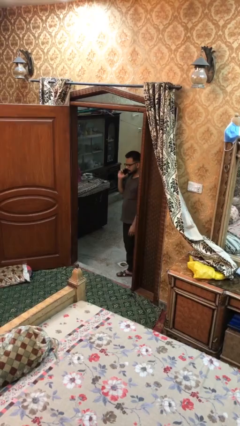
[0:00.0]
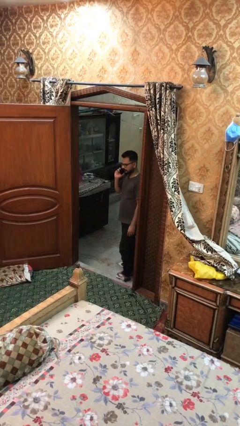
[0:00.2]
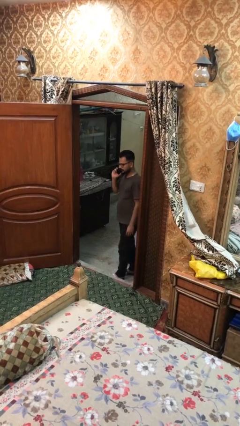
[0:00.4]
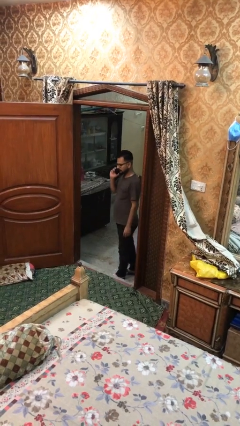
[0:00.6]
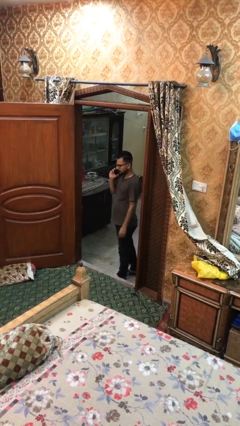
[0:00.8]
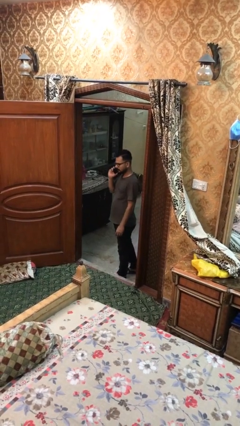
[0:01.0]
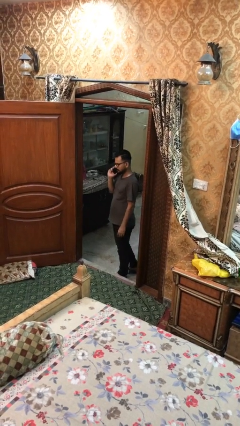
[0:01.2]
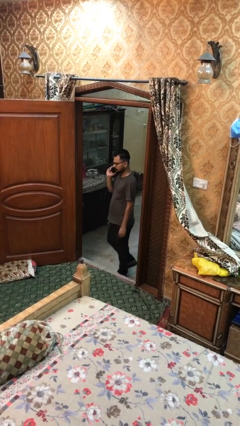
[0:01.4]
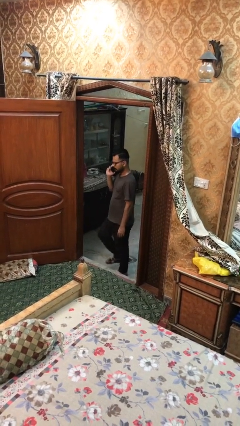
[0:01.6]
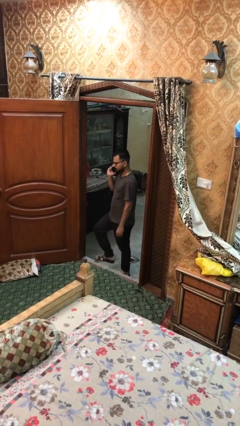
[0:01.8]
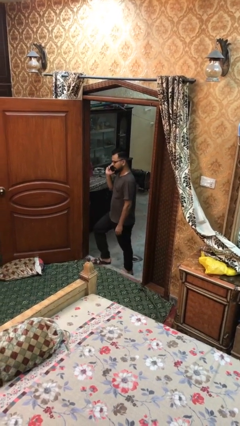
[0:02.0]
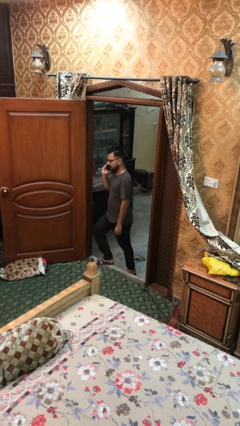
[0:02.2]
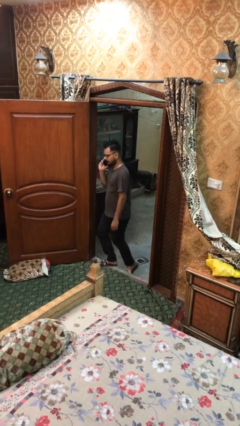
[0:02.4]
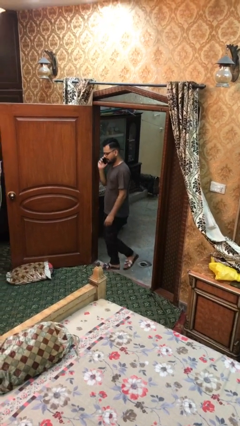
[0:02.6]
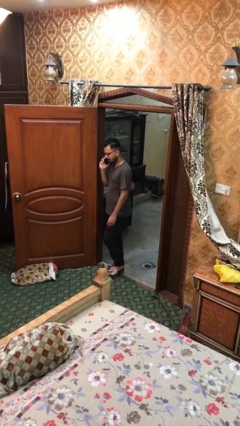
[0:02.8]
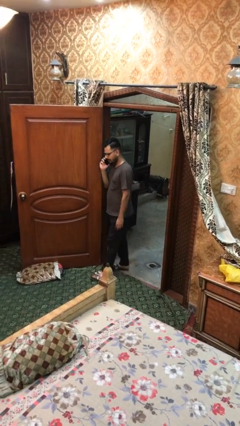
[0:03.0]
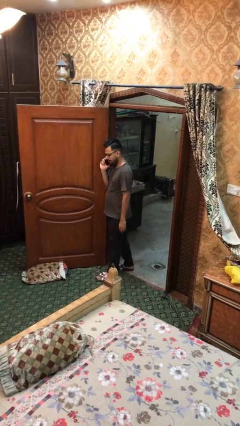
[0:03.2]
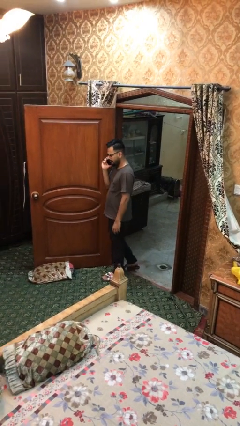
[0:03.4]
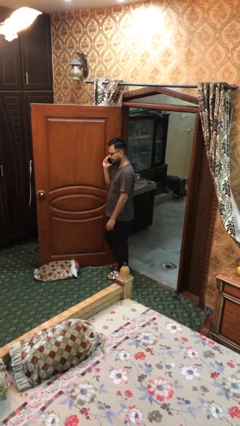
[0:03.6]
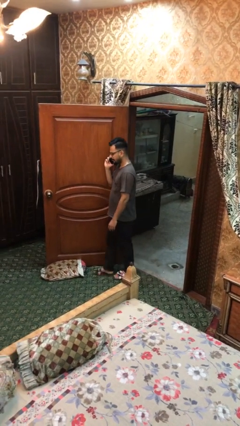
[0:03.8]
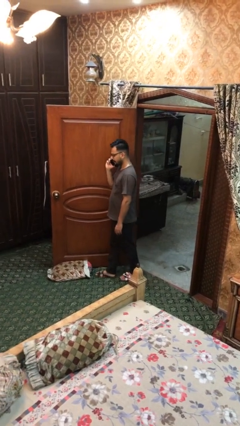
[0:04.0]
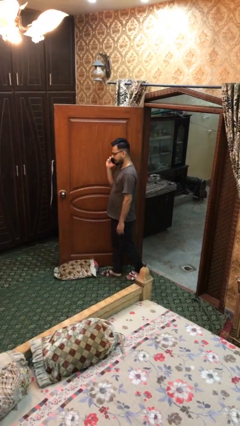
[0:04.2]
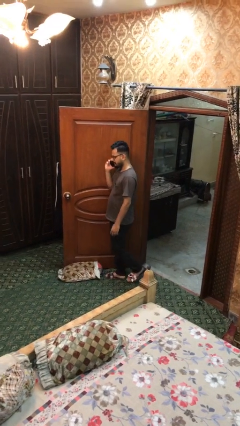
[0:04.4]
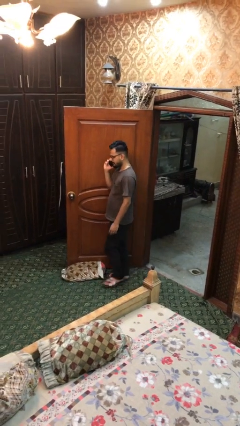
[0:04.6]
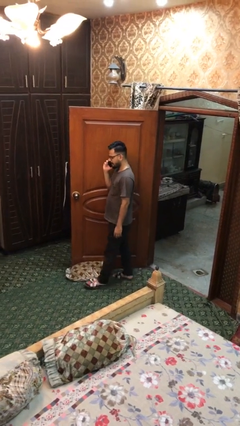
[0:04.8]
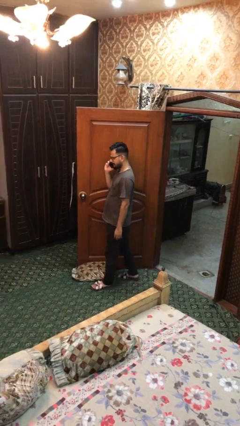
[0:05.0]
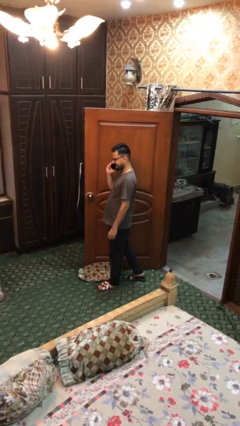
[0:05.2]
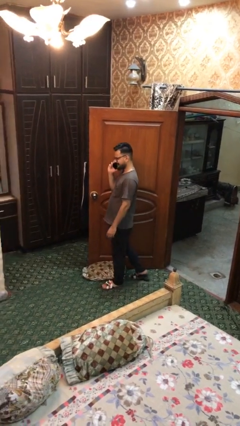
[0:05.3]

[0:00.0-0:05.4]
person enters scene through structure

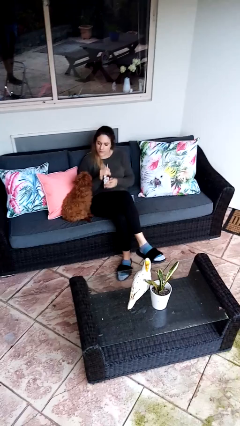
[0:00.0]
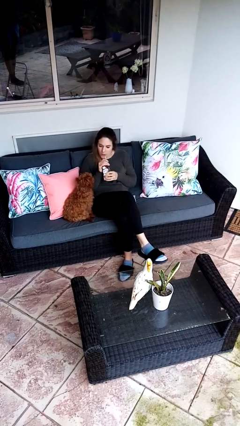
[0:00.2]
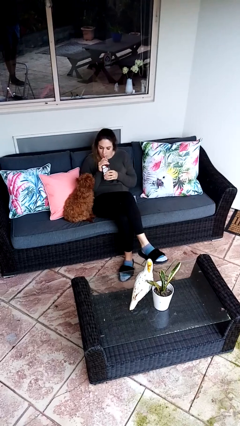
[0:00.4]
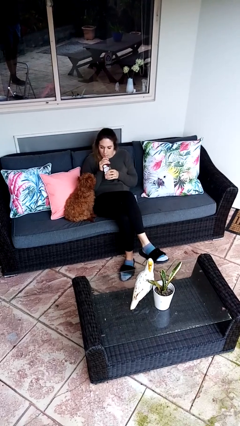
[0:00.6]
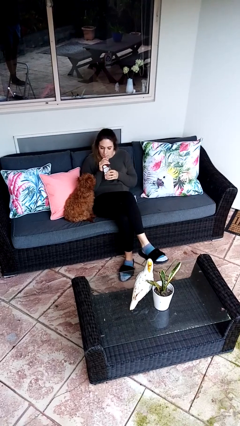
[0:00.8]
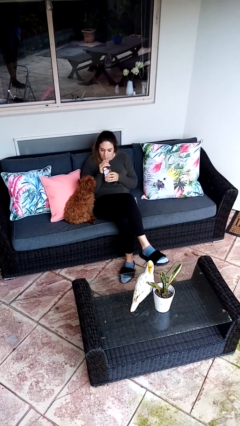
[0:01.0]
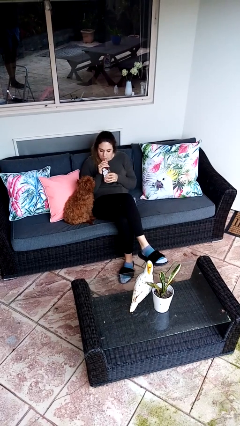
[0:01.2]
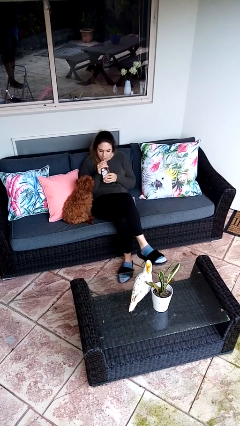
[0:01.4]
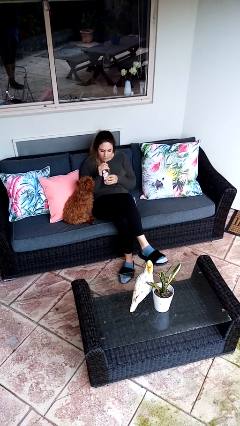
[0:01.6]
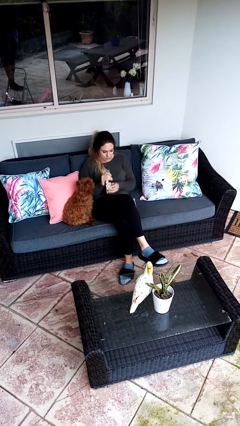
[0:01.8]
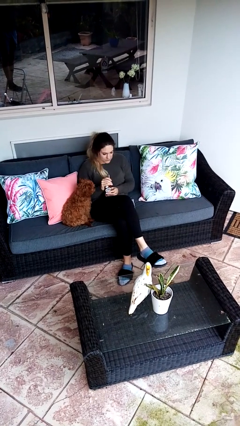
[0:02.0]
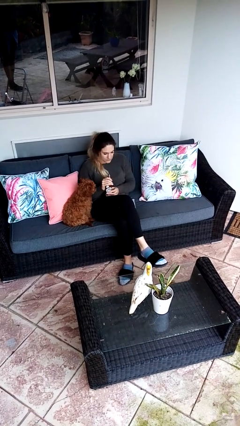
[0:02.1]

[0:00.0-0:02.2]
person drinks from straw

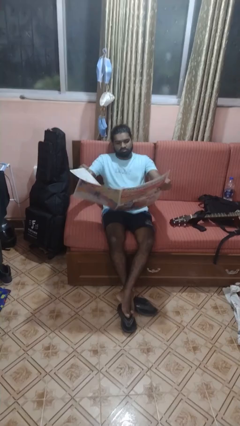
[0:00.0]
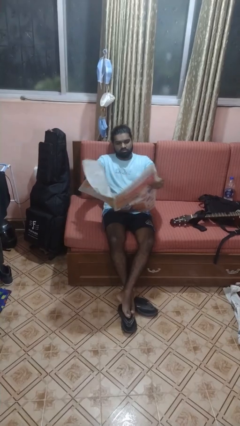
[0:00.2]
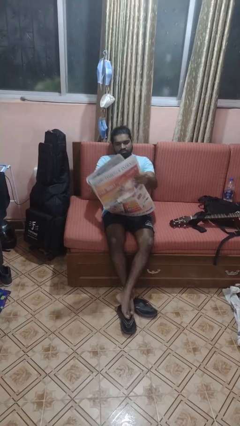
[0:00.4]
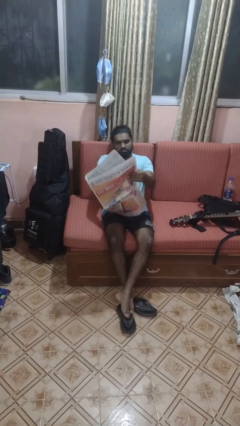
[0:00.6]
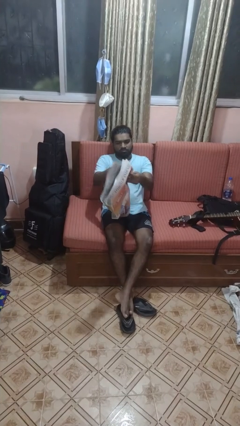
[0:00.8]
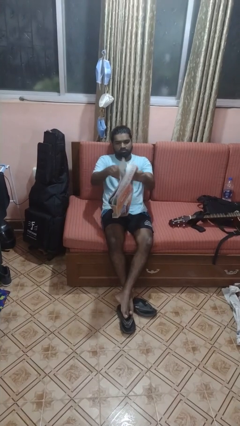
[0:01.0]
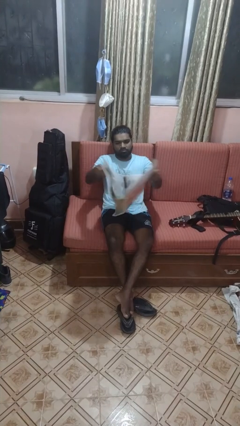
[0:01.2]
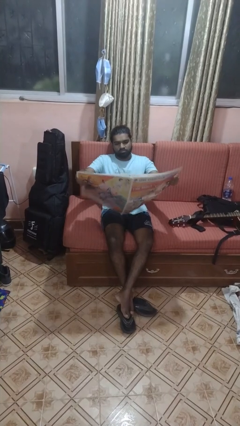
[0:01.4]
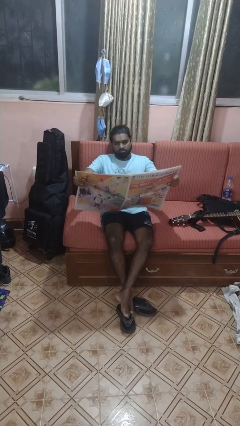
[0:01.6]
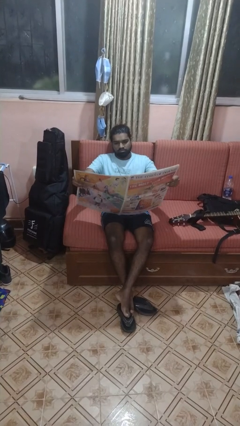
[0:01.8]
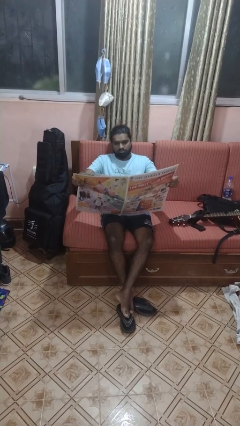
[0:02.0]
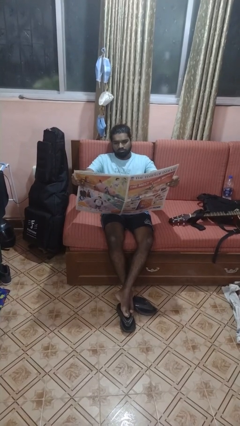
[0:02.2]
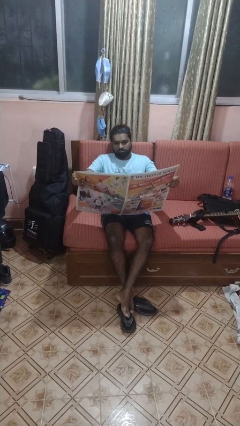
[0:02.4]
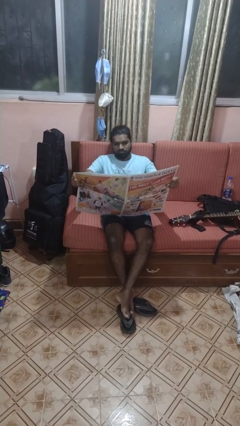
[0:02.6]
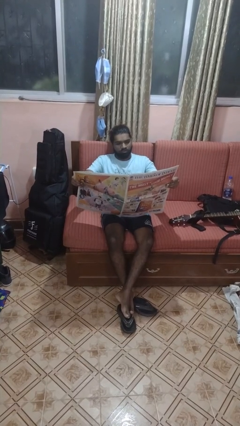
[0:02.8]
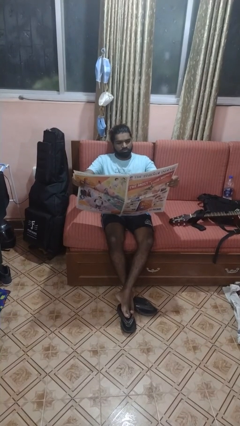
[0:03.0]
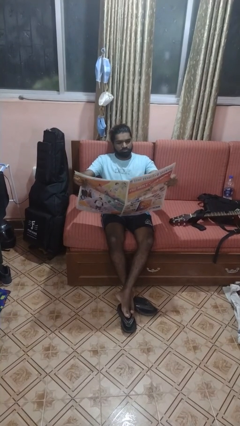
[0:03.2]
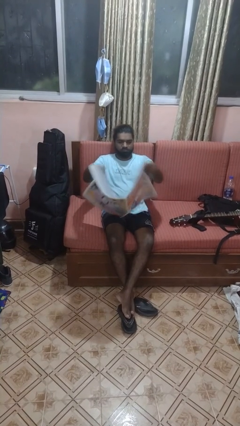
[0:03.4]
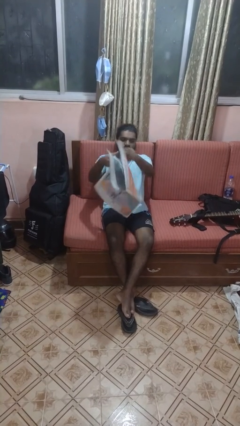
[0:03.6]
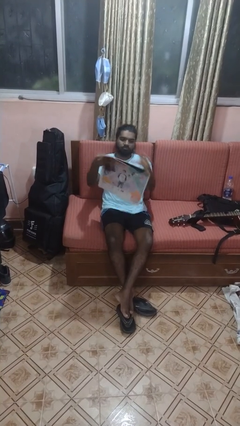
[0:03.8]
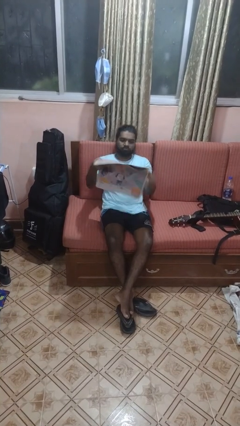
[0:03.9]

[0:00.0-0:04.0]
person reads newspaper

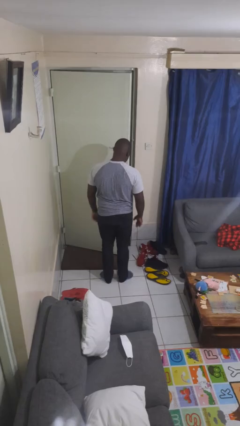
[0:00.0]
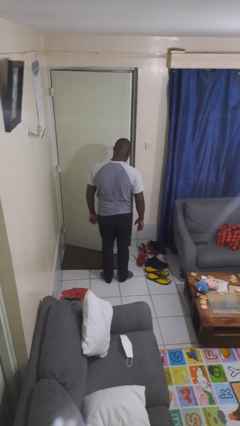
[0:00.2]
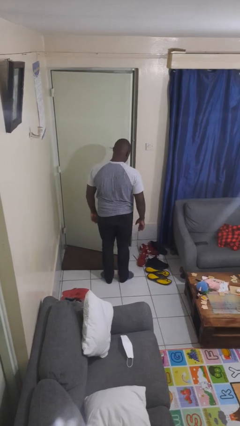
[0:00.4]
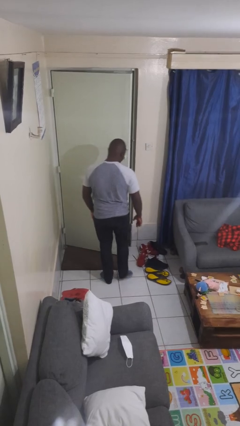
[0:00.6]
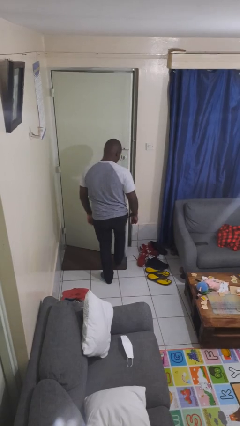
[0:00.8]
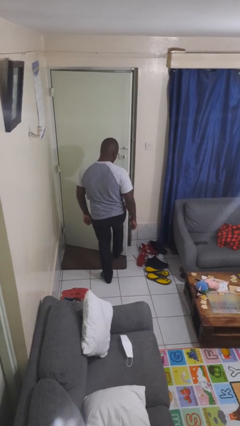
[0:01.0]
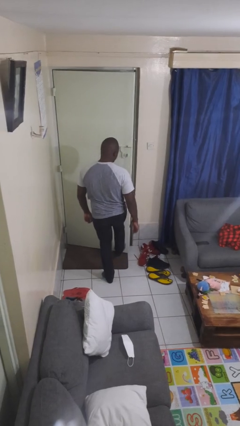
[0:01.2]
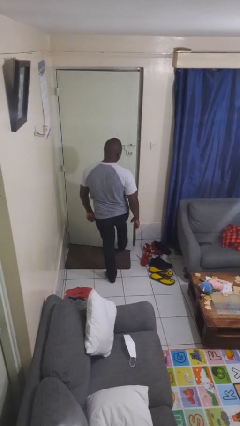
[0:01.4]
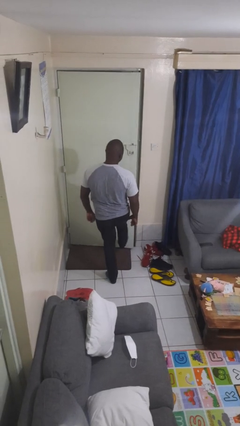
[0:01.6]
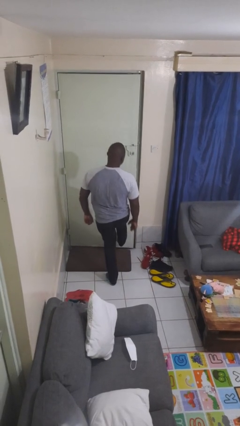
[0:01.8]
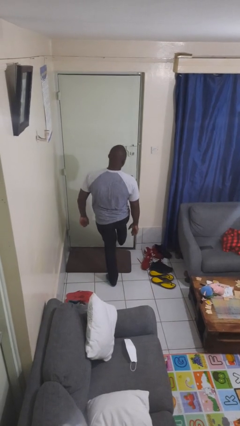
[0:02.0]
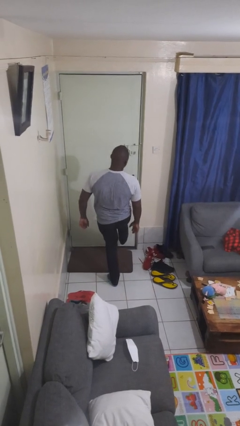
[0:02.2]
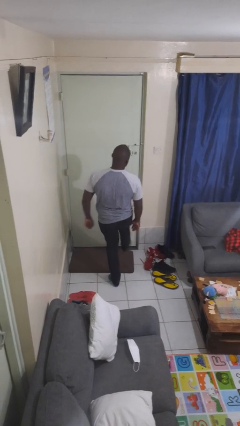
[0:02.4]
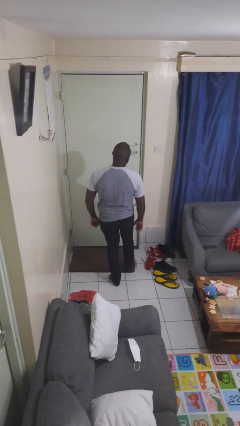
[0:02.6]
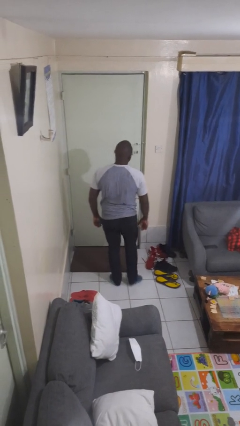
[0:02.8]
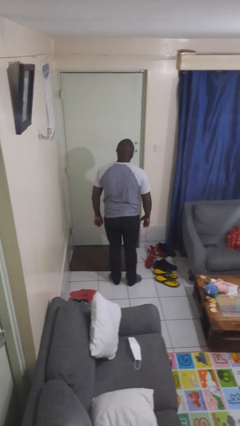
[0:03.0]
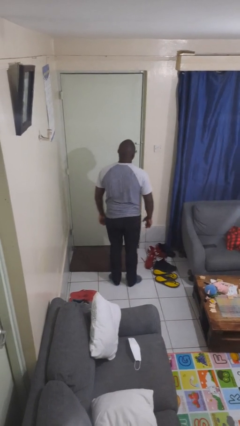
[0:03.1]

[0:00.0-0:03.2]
person closes door with foot

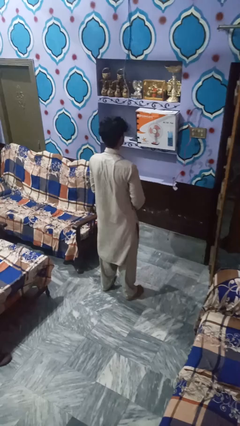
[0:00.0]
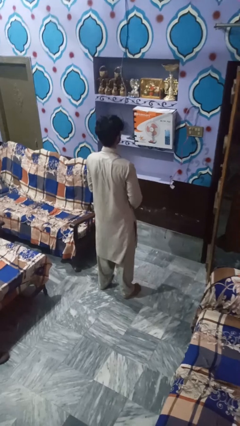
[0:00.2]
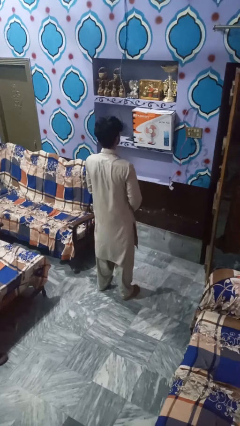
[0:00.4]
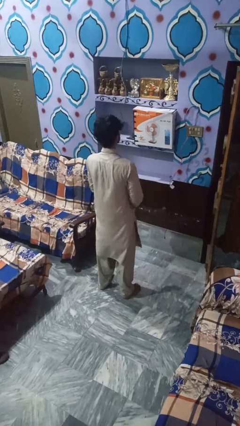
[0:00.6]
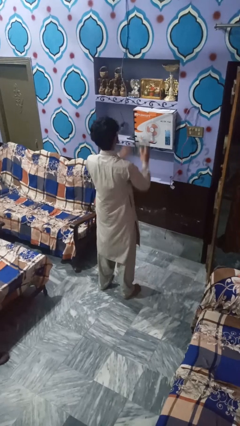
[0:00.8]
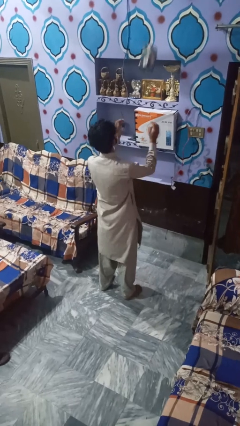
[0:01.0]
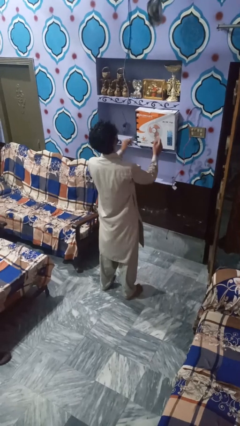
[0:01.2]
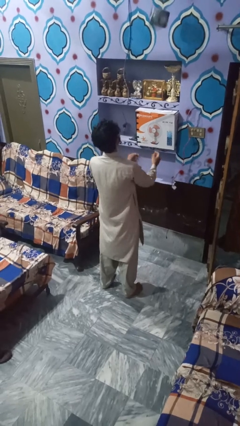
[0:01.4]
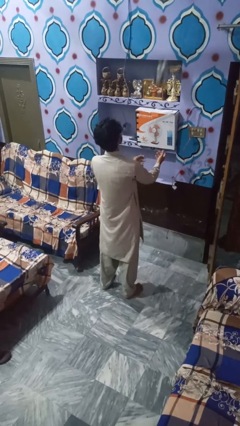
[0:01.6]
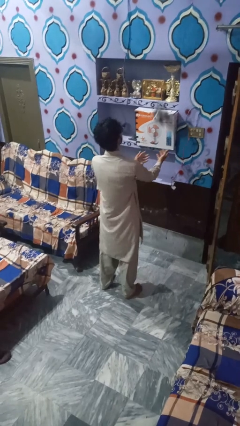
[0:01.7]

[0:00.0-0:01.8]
person drops object

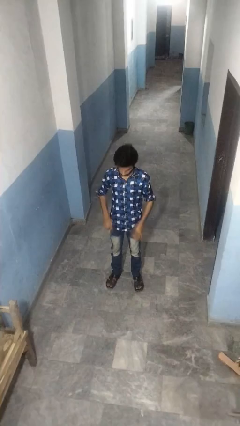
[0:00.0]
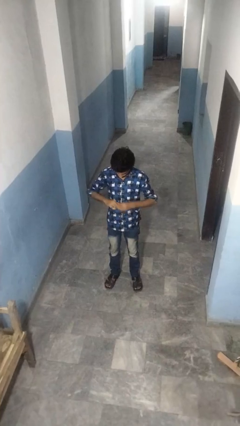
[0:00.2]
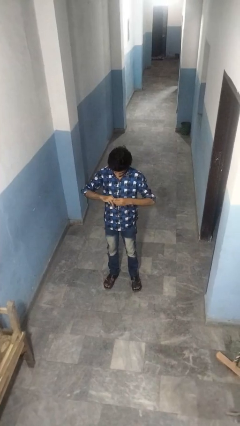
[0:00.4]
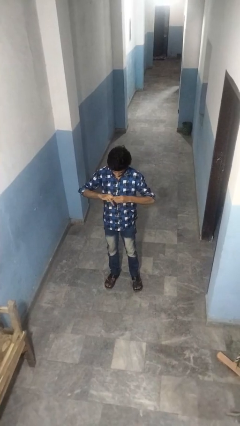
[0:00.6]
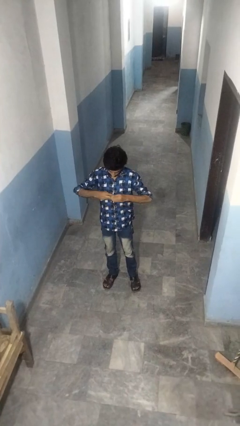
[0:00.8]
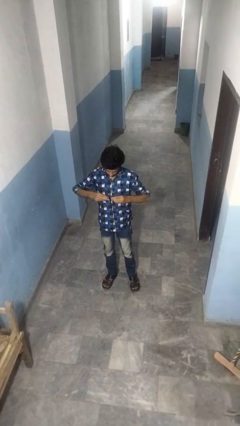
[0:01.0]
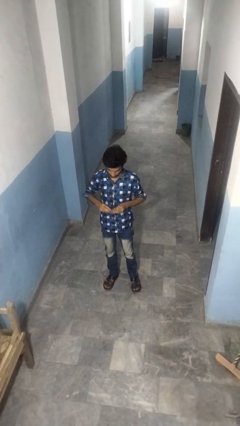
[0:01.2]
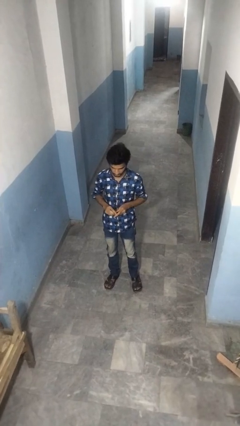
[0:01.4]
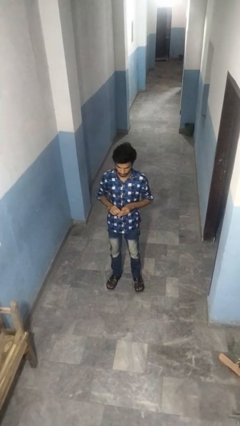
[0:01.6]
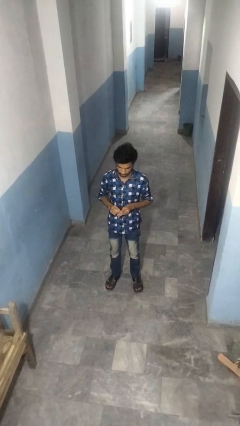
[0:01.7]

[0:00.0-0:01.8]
person takes off ring
